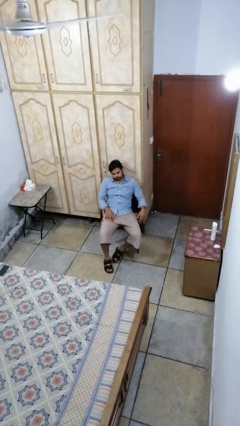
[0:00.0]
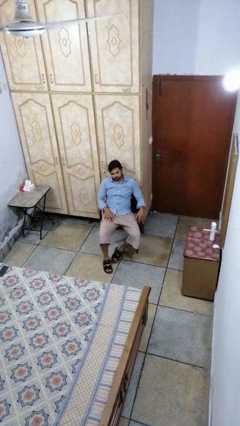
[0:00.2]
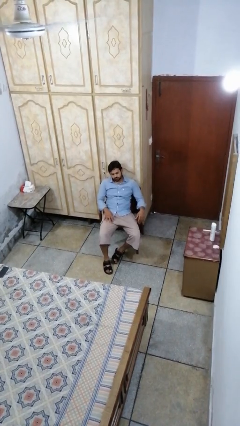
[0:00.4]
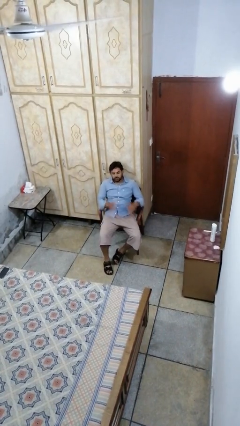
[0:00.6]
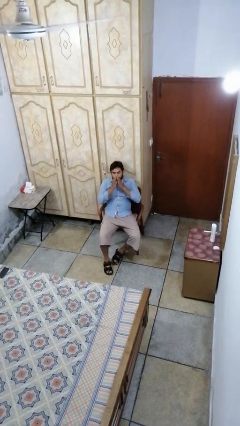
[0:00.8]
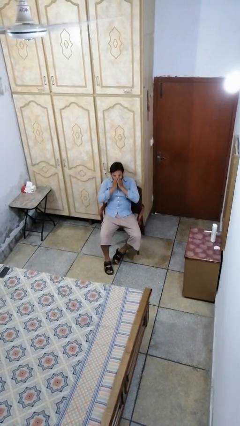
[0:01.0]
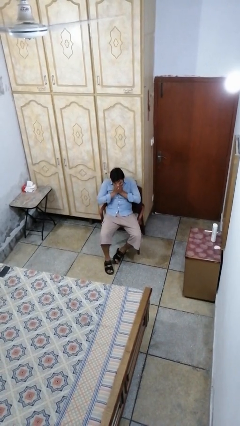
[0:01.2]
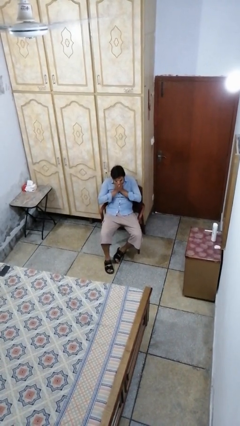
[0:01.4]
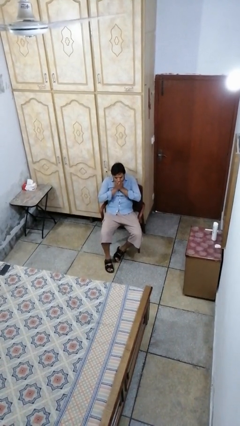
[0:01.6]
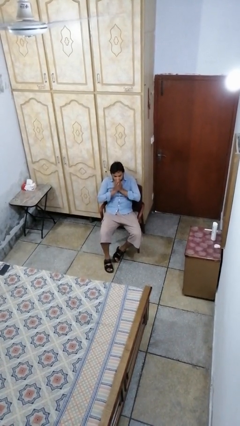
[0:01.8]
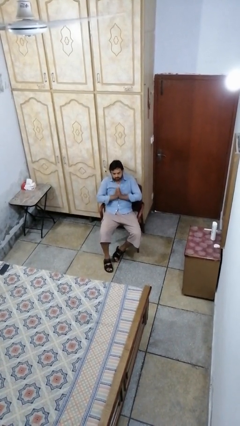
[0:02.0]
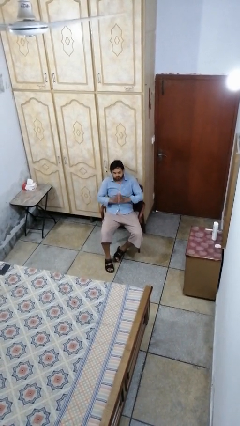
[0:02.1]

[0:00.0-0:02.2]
person sneezes into hand

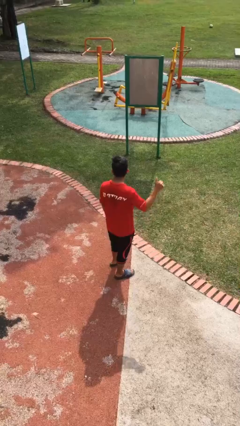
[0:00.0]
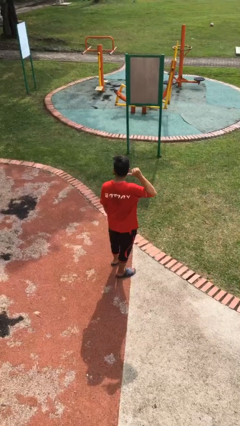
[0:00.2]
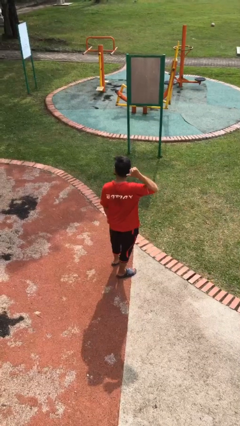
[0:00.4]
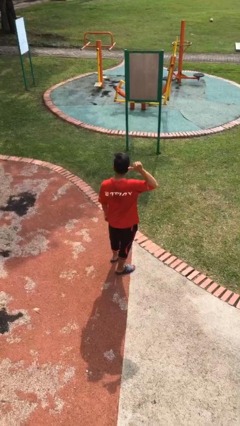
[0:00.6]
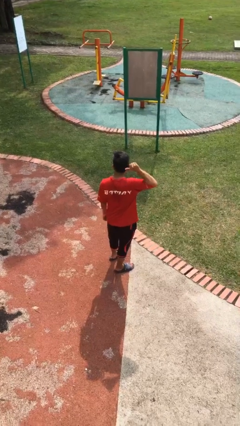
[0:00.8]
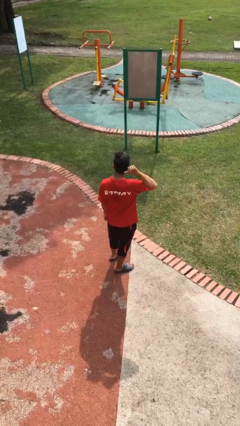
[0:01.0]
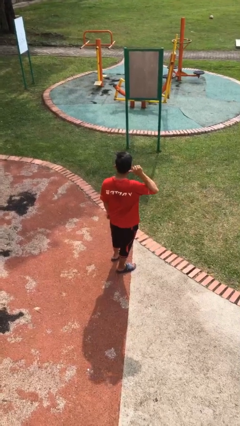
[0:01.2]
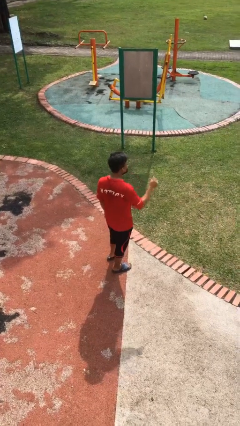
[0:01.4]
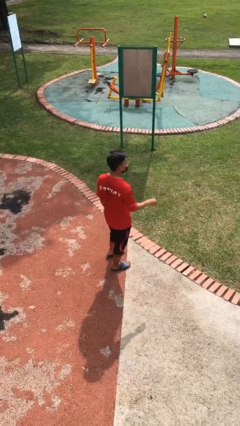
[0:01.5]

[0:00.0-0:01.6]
person gestures behind me

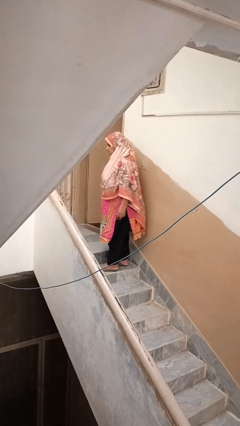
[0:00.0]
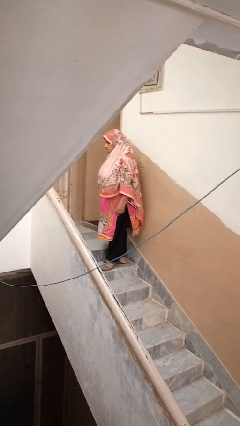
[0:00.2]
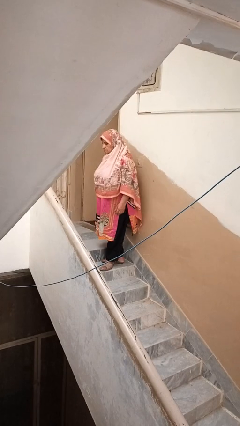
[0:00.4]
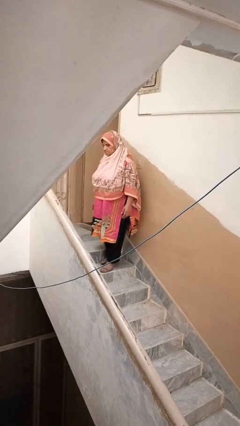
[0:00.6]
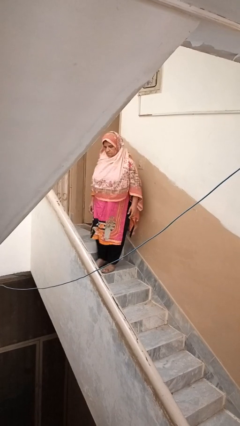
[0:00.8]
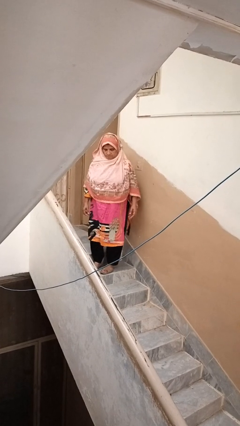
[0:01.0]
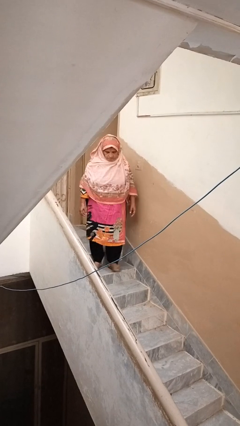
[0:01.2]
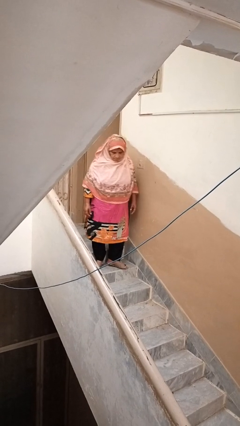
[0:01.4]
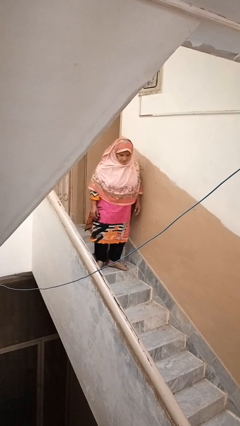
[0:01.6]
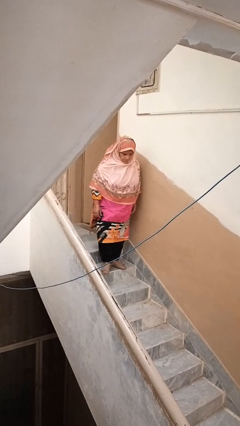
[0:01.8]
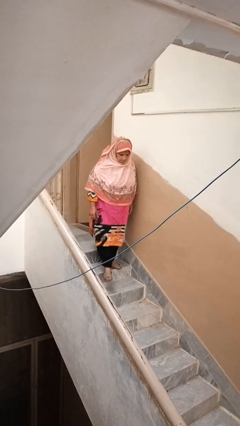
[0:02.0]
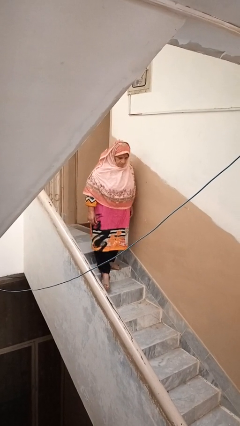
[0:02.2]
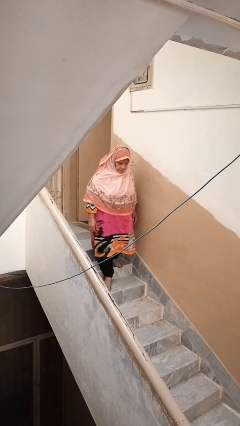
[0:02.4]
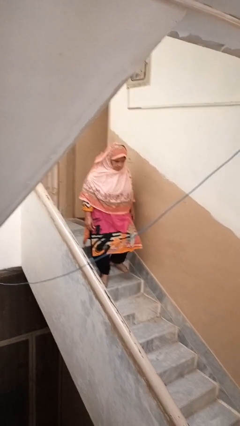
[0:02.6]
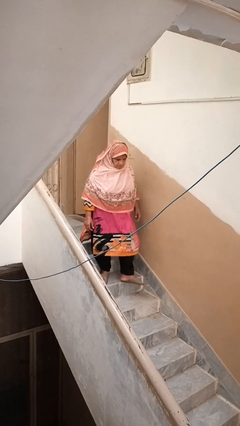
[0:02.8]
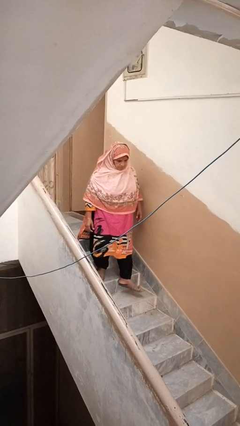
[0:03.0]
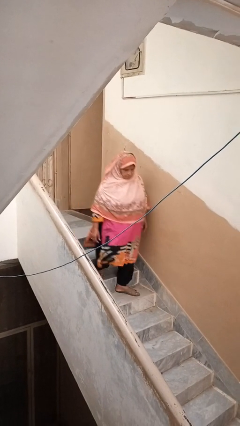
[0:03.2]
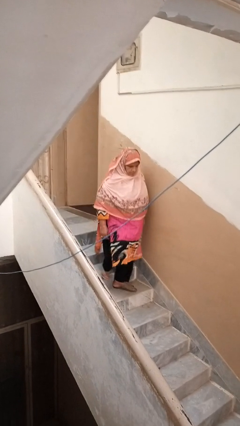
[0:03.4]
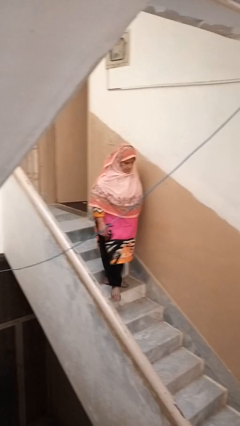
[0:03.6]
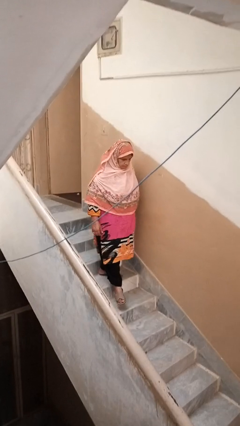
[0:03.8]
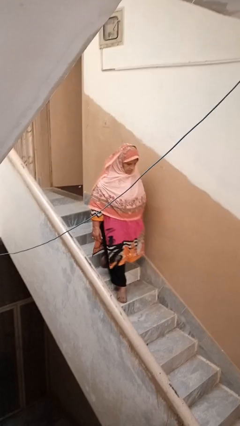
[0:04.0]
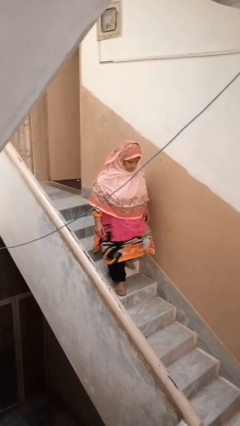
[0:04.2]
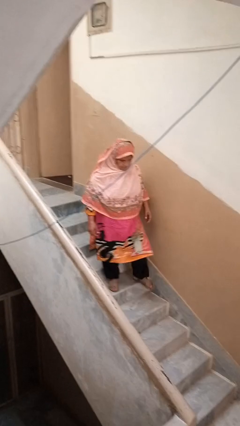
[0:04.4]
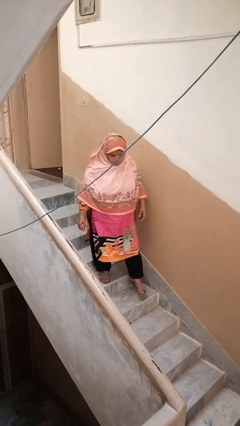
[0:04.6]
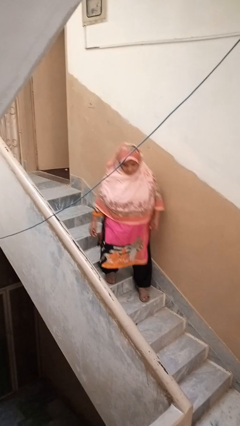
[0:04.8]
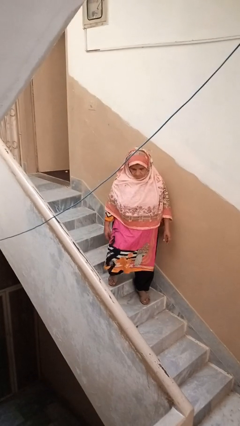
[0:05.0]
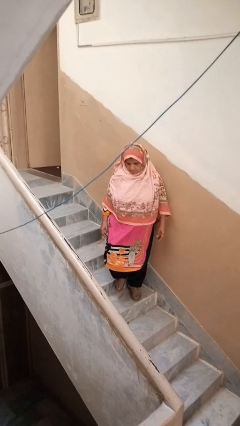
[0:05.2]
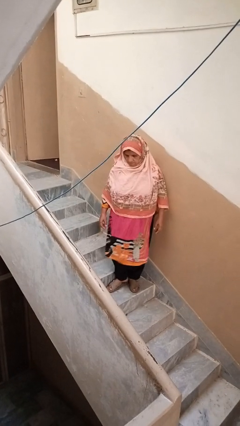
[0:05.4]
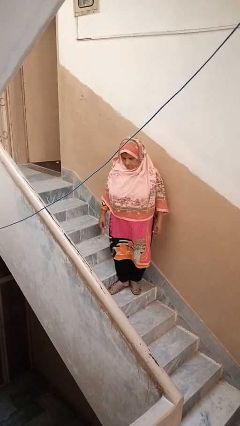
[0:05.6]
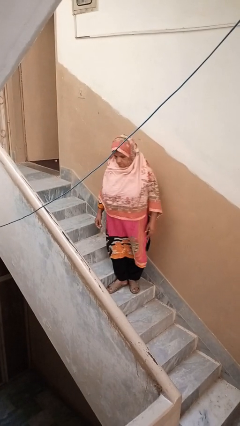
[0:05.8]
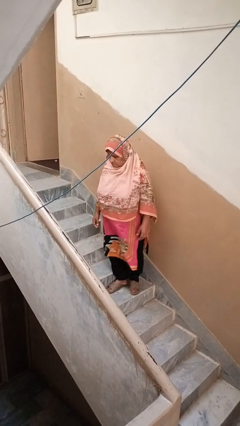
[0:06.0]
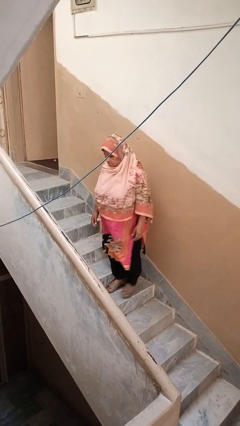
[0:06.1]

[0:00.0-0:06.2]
person climbs down stairs

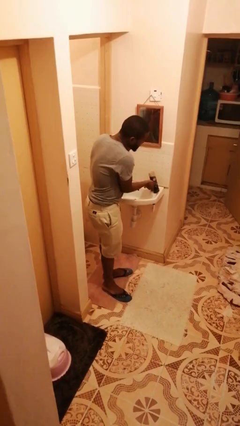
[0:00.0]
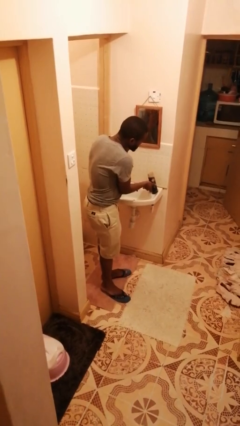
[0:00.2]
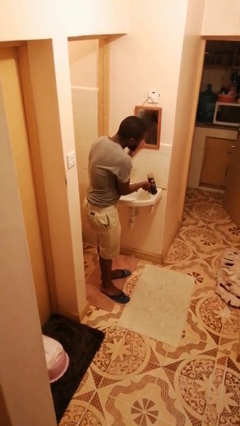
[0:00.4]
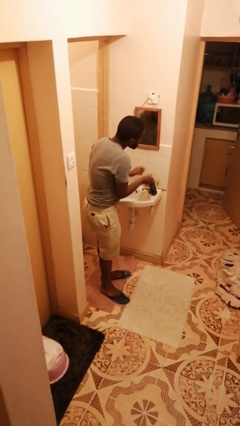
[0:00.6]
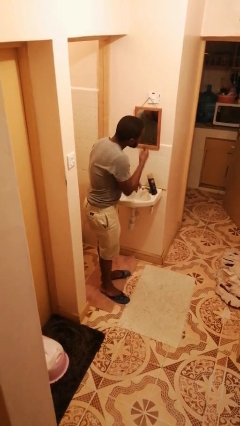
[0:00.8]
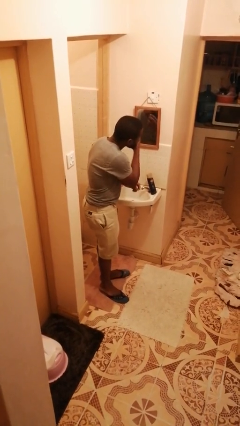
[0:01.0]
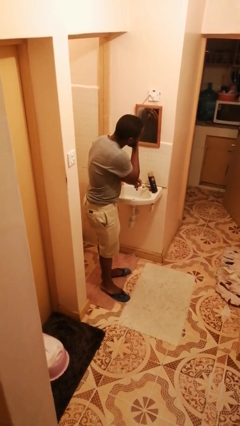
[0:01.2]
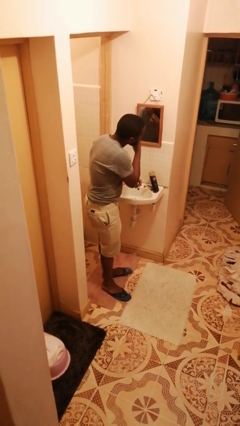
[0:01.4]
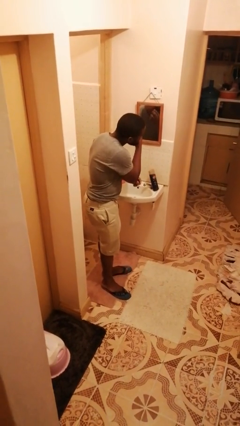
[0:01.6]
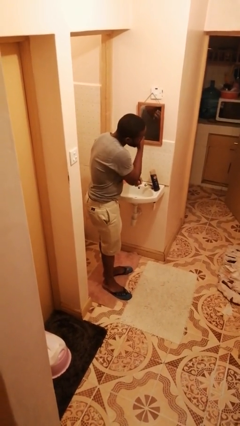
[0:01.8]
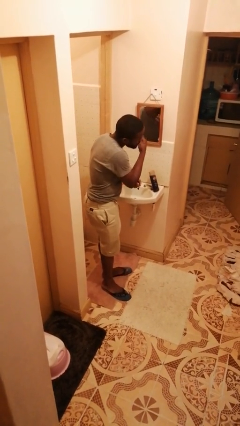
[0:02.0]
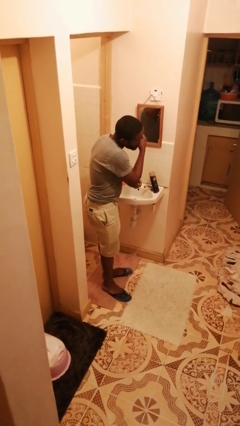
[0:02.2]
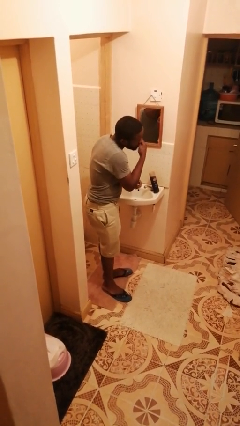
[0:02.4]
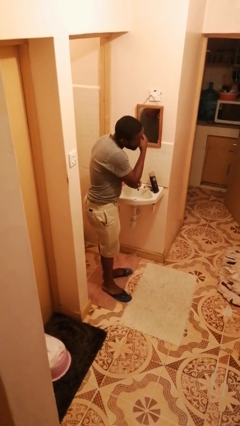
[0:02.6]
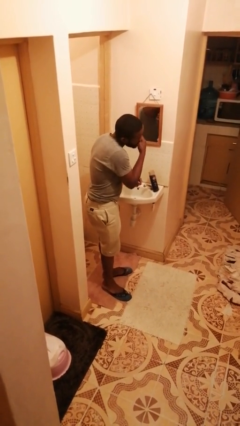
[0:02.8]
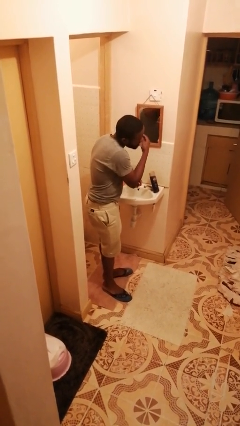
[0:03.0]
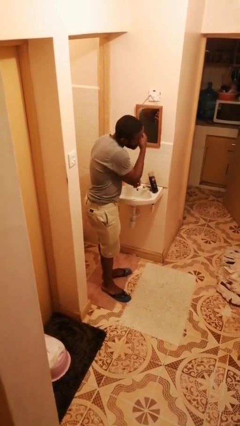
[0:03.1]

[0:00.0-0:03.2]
person shaves face

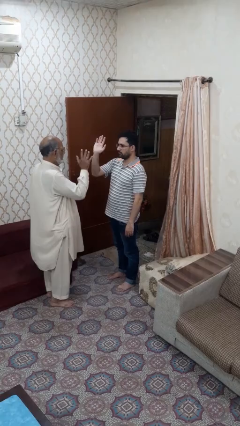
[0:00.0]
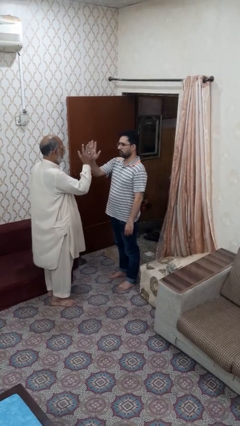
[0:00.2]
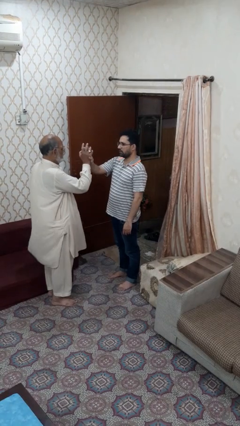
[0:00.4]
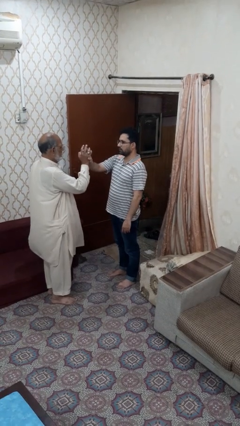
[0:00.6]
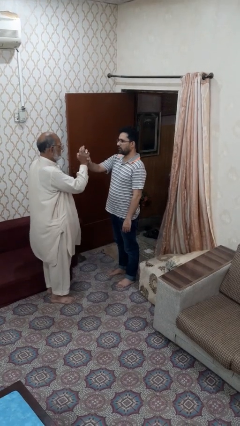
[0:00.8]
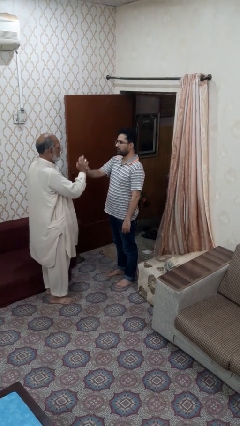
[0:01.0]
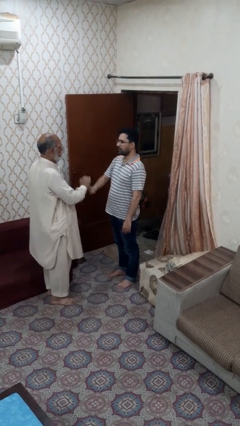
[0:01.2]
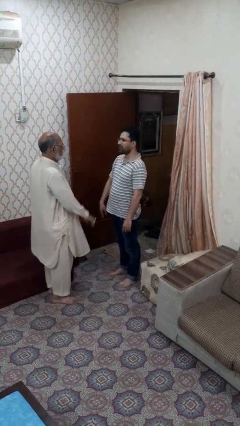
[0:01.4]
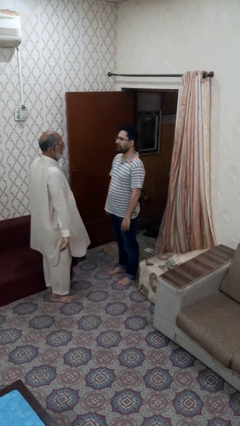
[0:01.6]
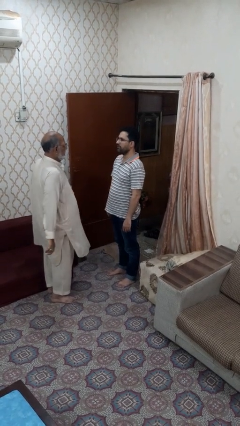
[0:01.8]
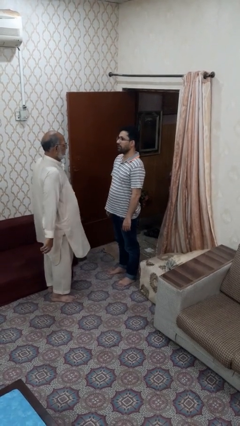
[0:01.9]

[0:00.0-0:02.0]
person highfives hand

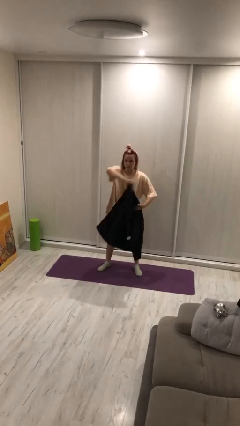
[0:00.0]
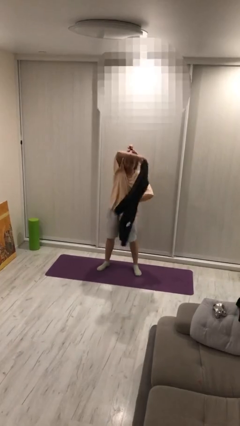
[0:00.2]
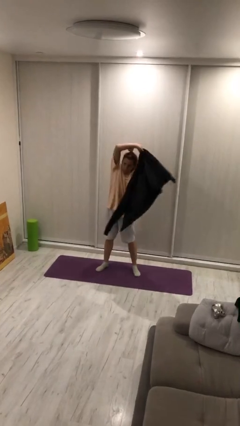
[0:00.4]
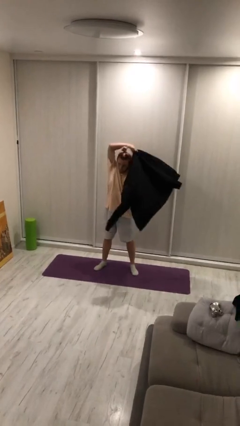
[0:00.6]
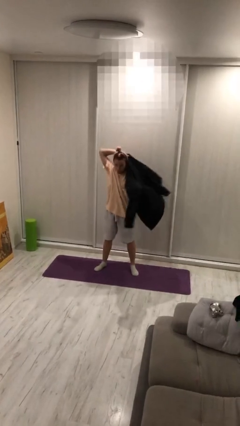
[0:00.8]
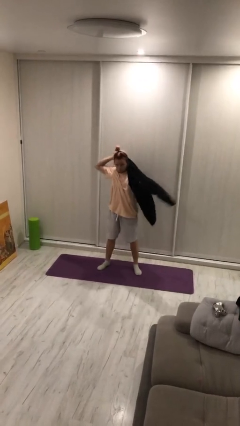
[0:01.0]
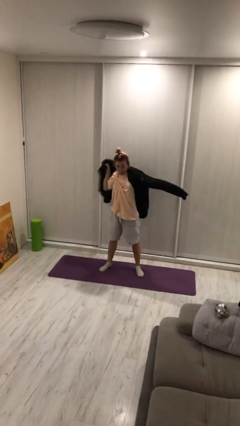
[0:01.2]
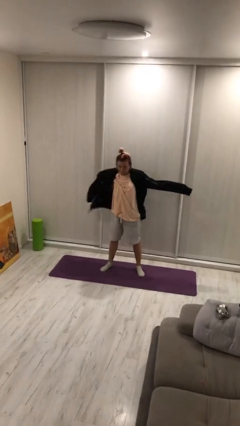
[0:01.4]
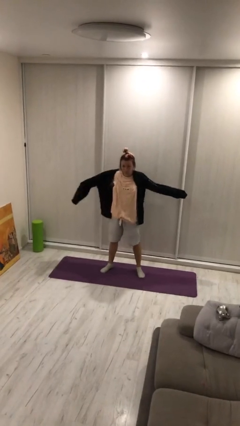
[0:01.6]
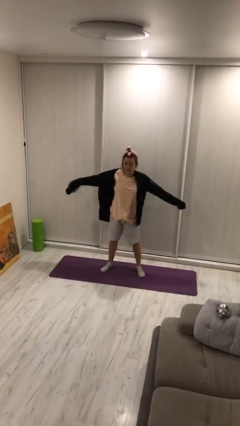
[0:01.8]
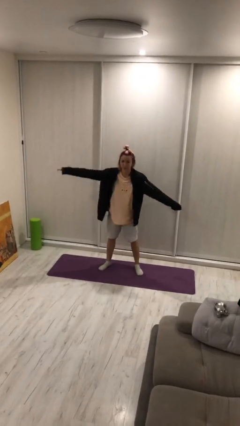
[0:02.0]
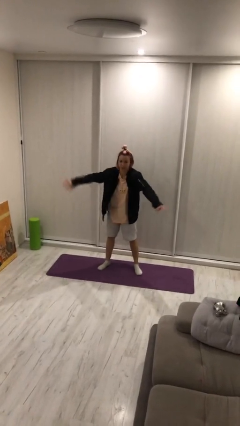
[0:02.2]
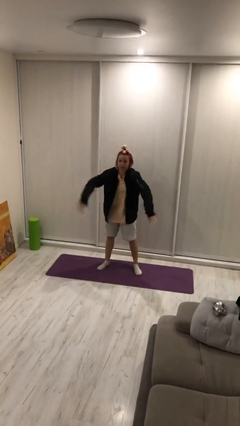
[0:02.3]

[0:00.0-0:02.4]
person puts on jacket

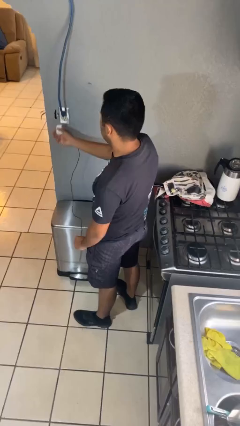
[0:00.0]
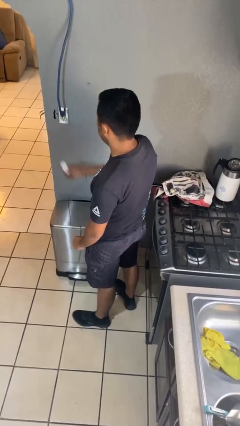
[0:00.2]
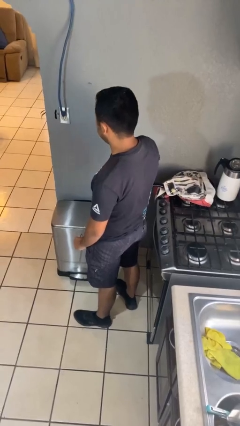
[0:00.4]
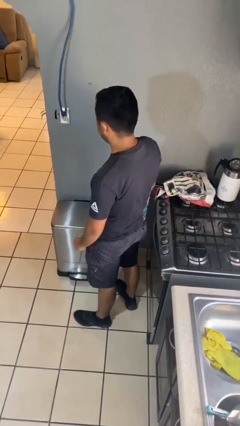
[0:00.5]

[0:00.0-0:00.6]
person unplugs from electrical socket
